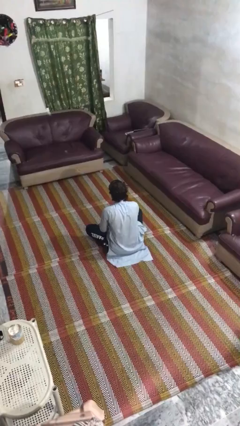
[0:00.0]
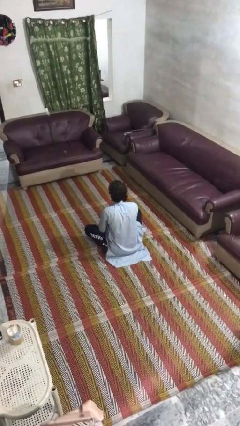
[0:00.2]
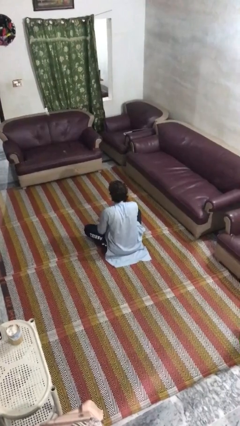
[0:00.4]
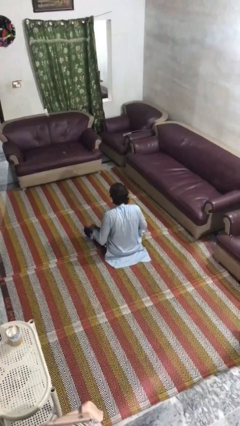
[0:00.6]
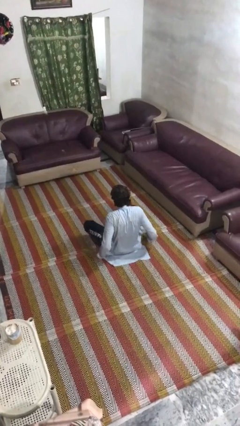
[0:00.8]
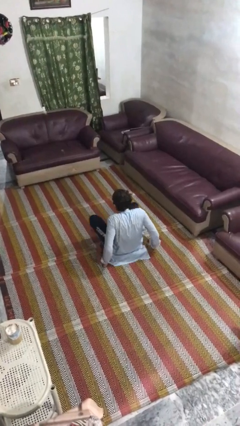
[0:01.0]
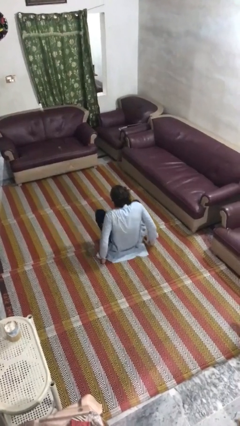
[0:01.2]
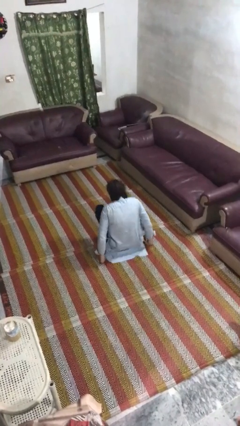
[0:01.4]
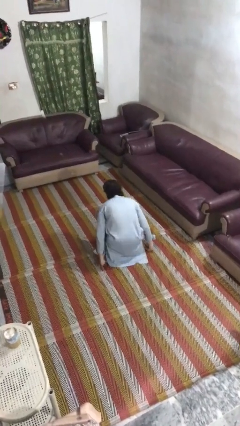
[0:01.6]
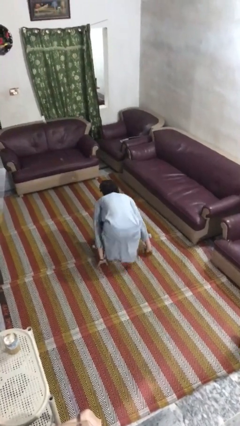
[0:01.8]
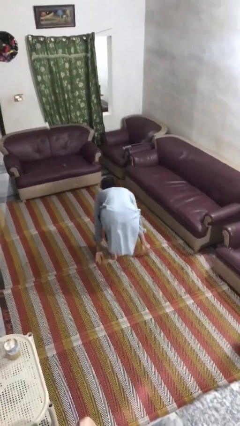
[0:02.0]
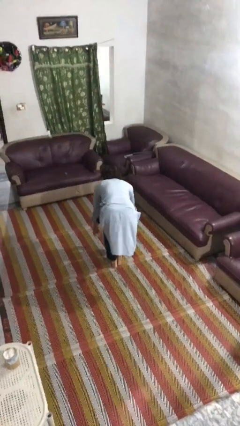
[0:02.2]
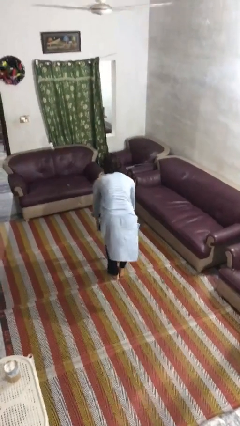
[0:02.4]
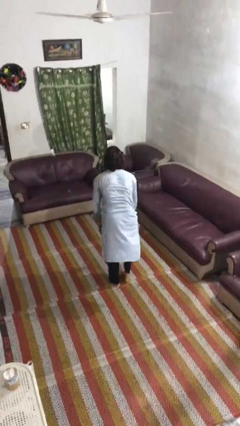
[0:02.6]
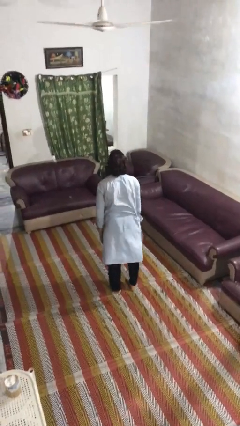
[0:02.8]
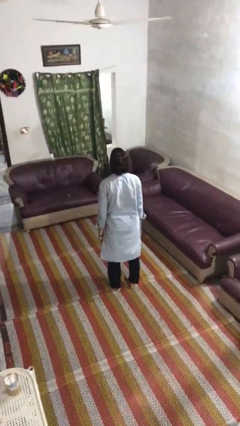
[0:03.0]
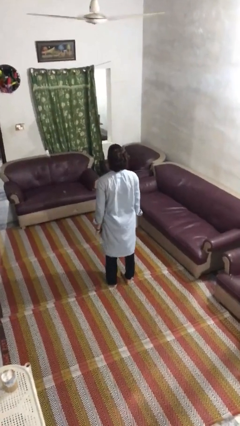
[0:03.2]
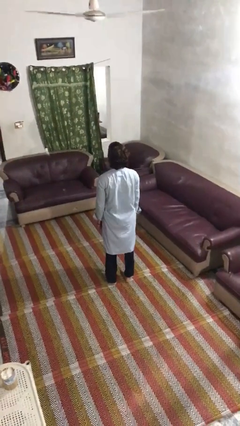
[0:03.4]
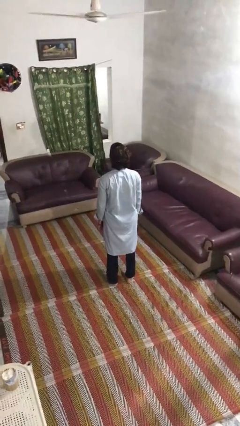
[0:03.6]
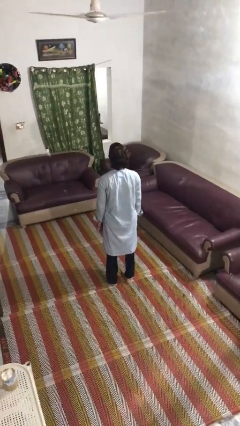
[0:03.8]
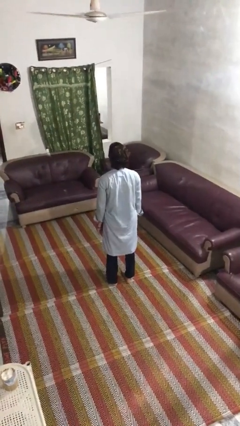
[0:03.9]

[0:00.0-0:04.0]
person stands up from floor

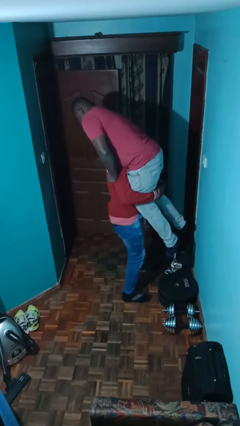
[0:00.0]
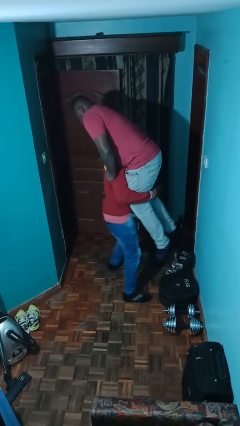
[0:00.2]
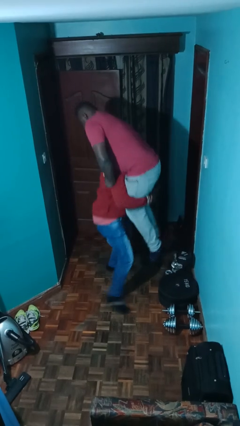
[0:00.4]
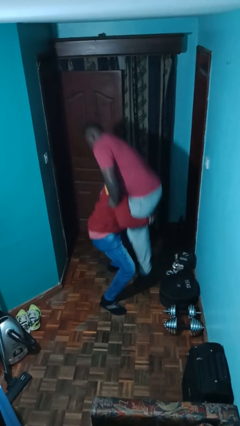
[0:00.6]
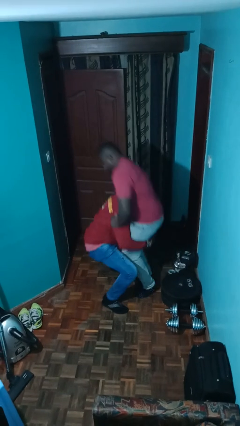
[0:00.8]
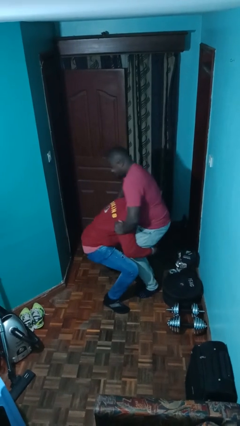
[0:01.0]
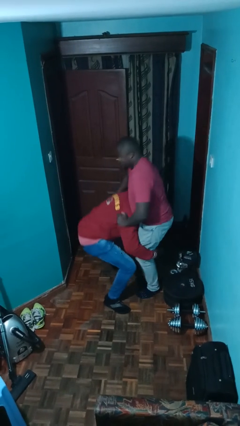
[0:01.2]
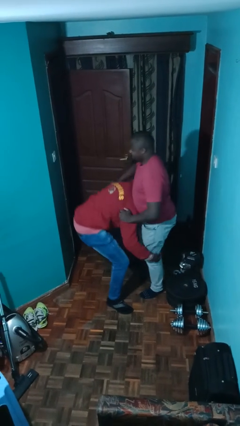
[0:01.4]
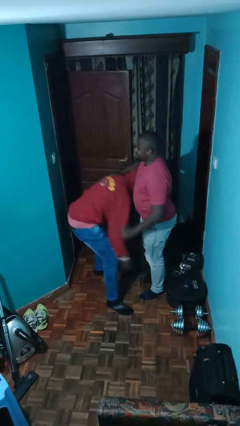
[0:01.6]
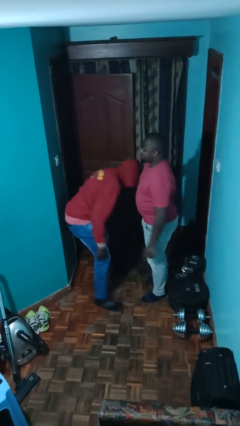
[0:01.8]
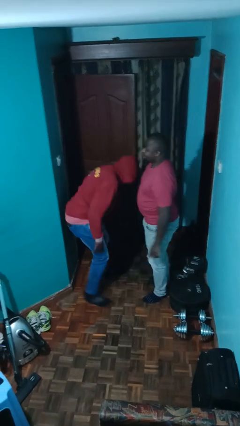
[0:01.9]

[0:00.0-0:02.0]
person puts down person

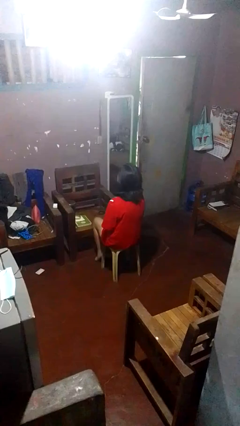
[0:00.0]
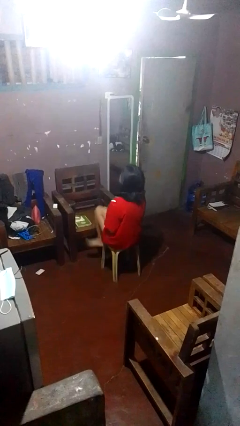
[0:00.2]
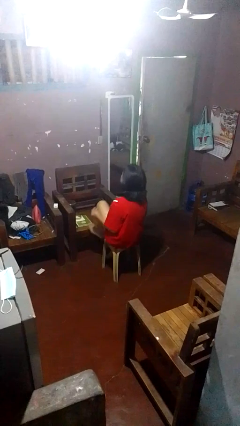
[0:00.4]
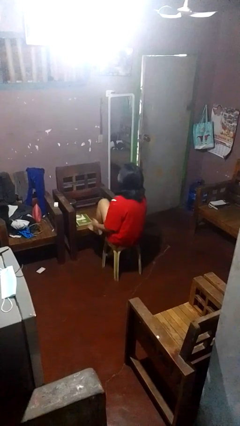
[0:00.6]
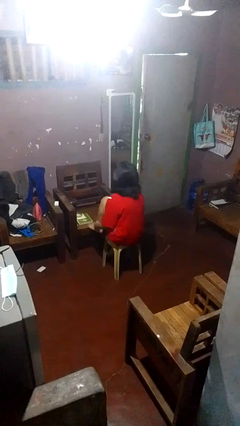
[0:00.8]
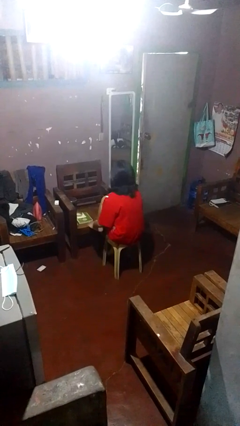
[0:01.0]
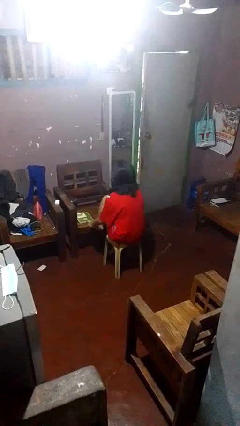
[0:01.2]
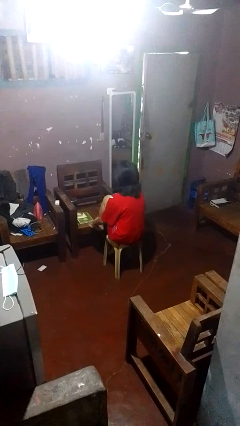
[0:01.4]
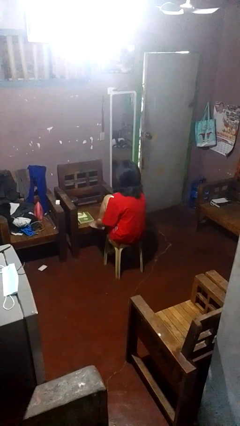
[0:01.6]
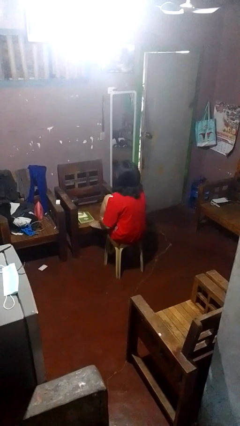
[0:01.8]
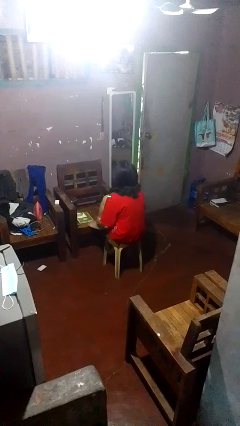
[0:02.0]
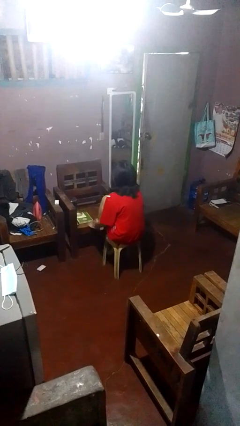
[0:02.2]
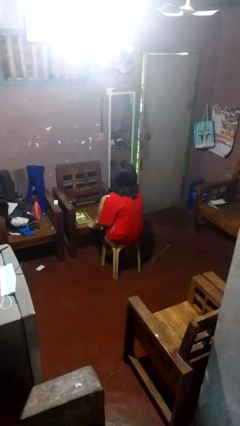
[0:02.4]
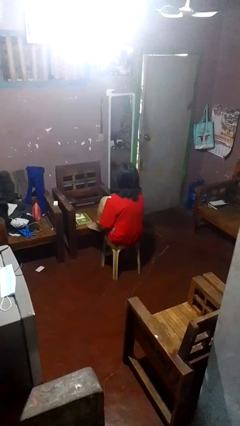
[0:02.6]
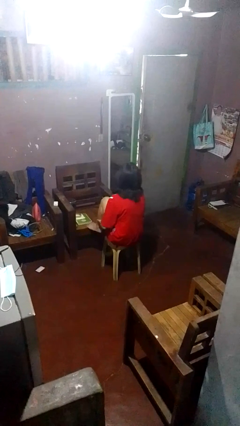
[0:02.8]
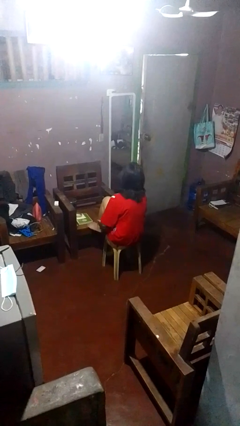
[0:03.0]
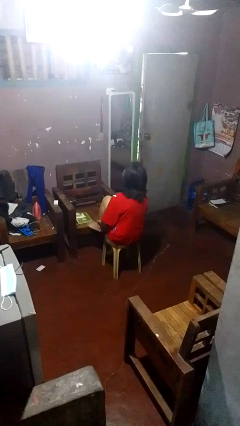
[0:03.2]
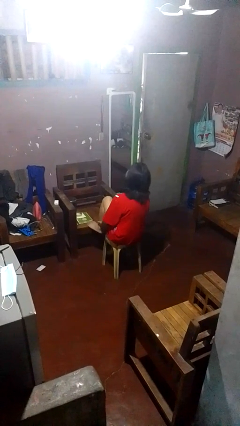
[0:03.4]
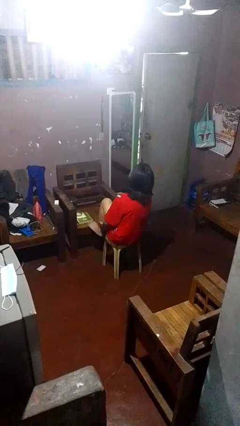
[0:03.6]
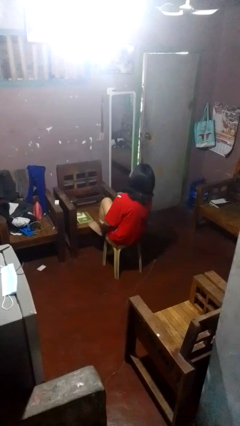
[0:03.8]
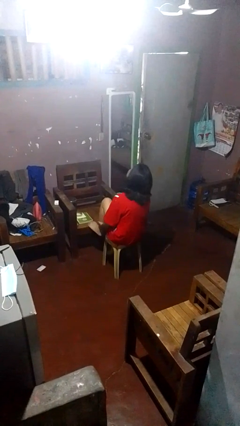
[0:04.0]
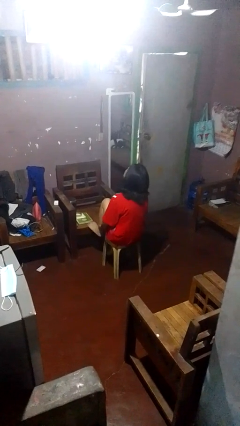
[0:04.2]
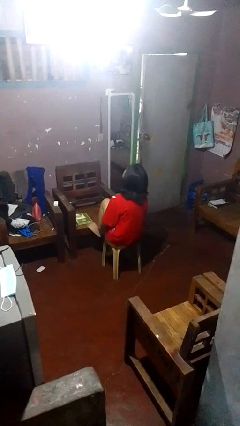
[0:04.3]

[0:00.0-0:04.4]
person rubs foot

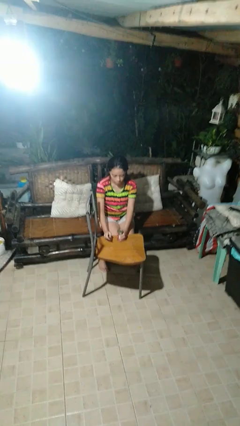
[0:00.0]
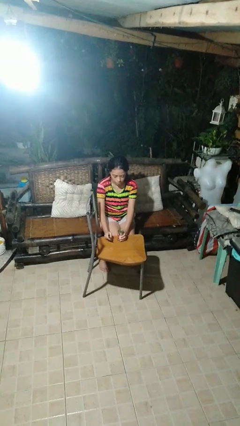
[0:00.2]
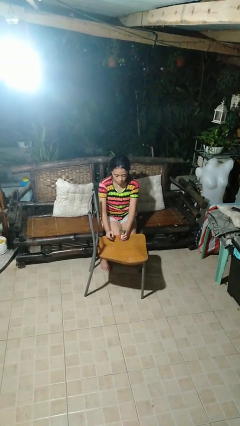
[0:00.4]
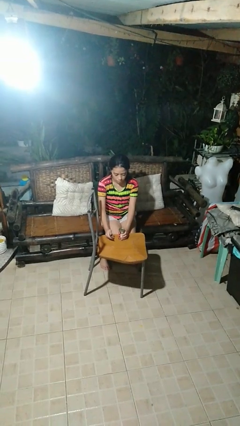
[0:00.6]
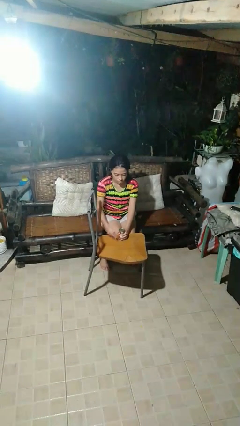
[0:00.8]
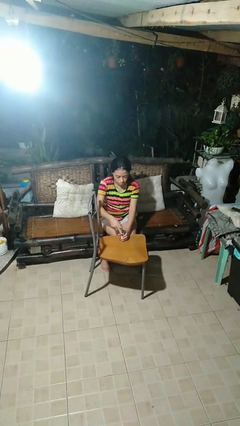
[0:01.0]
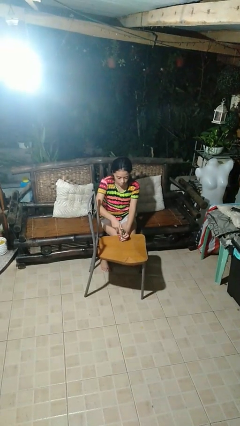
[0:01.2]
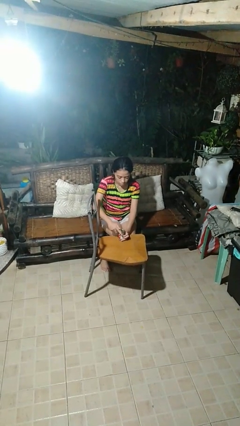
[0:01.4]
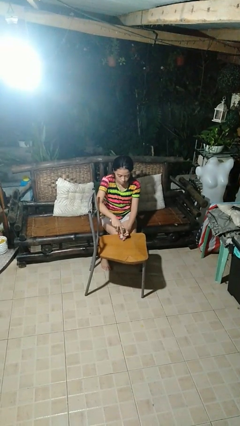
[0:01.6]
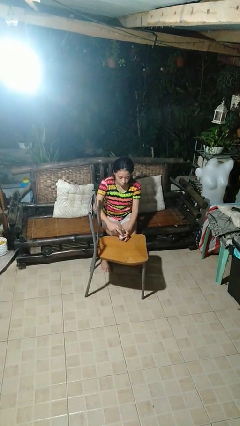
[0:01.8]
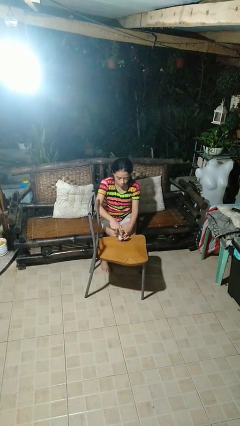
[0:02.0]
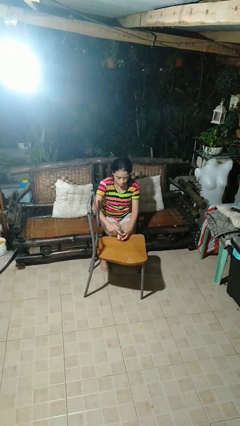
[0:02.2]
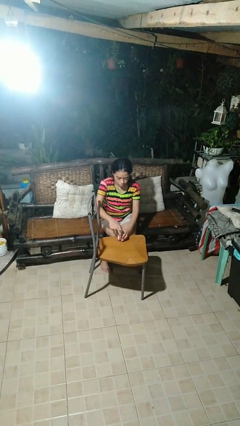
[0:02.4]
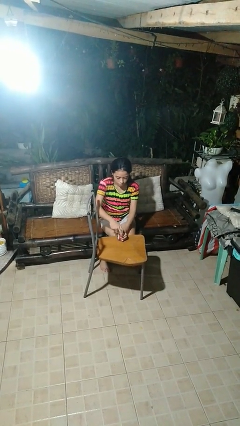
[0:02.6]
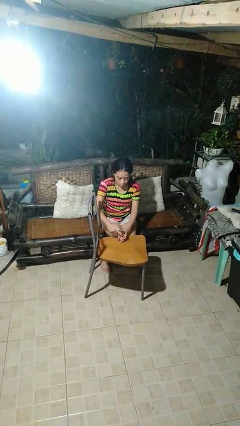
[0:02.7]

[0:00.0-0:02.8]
person opens can with can opener

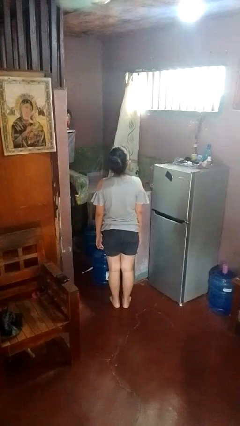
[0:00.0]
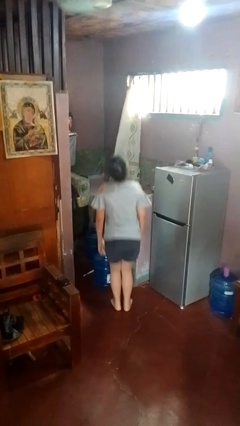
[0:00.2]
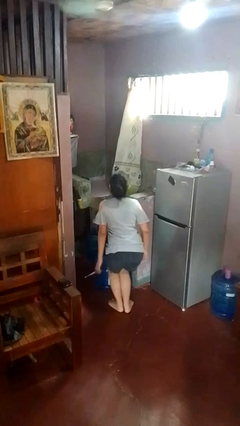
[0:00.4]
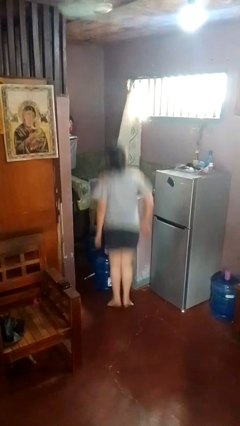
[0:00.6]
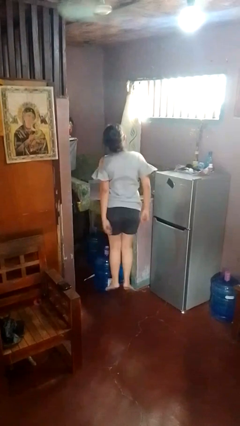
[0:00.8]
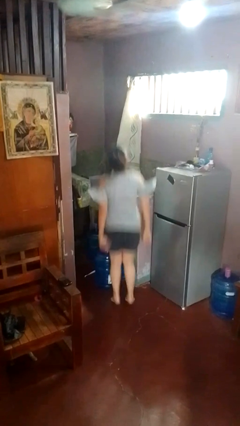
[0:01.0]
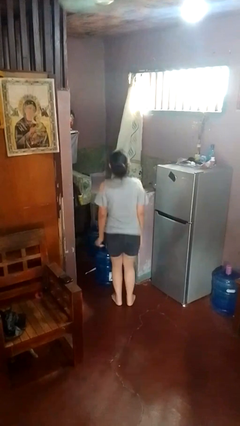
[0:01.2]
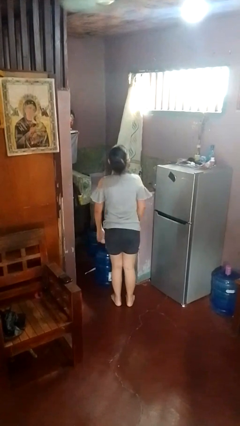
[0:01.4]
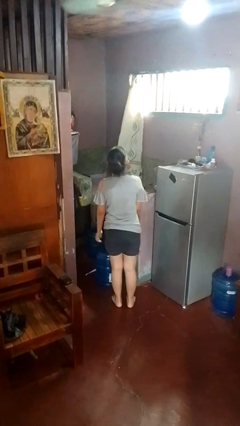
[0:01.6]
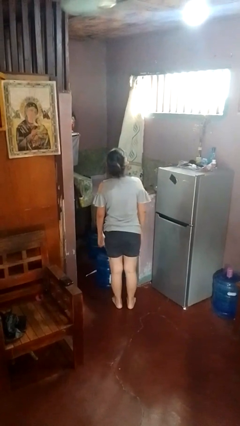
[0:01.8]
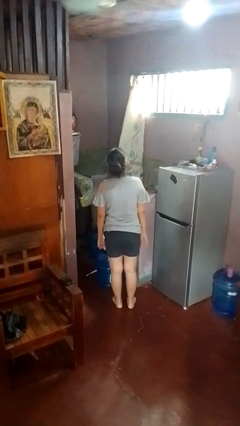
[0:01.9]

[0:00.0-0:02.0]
person jumps

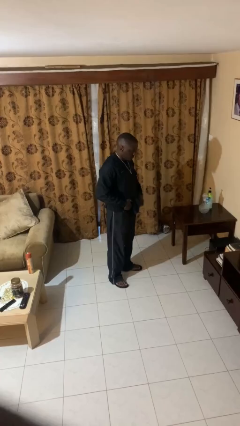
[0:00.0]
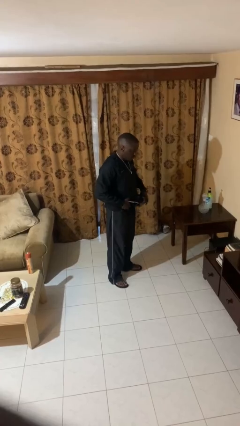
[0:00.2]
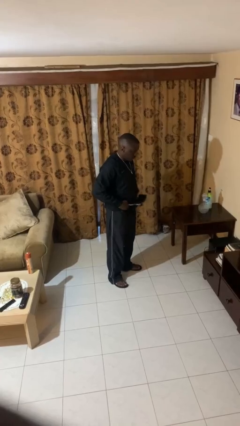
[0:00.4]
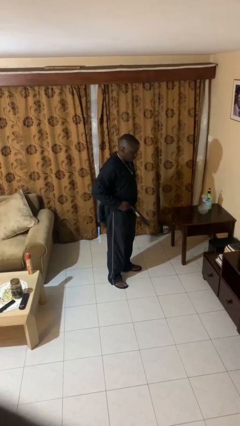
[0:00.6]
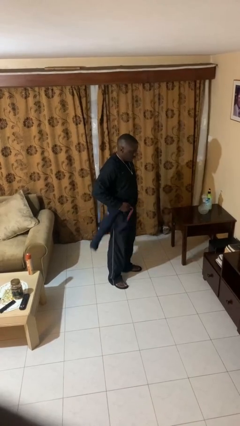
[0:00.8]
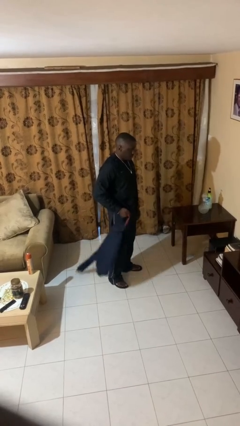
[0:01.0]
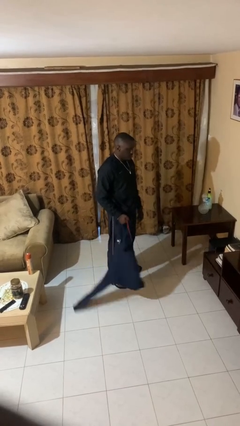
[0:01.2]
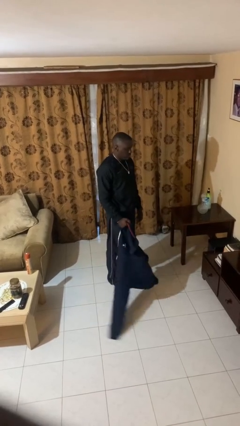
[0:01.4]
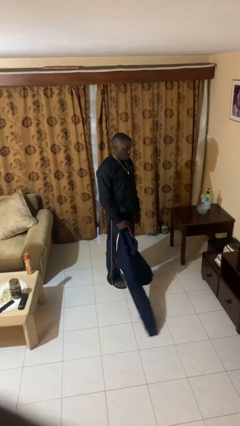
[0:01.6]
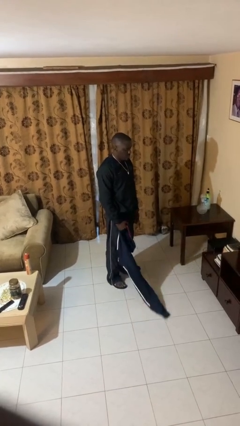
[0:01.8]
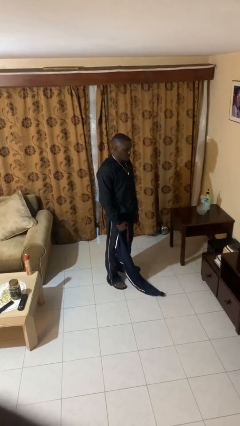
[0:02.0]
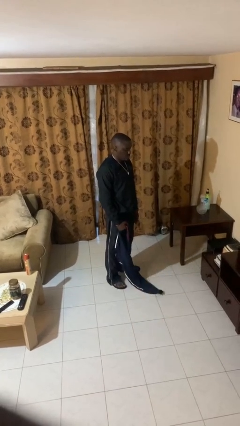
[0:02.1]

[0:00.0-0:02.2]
person unties jacket around waist
